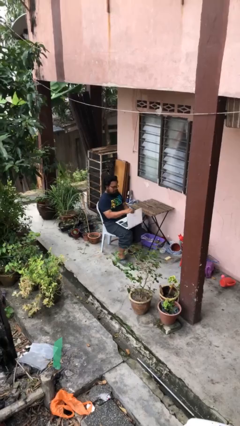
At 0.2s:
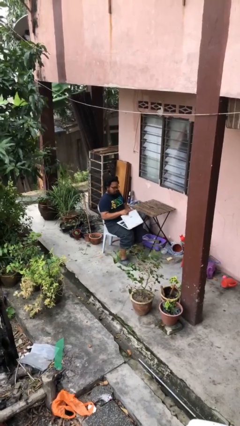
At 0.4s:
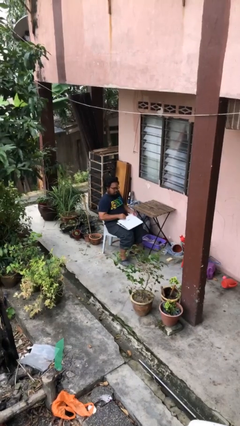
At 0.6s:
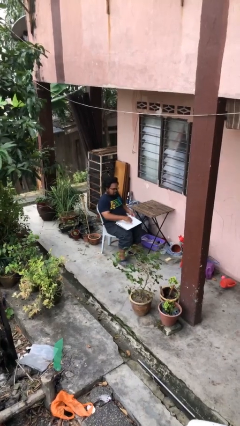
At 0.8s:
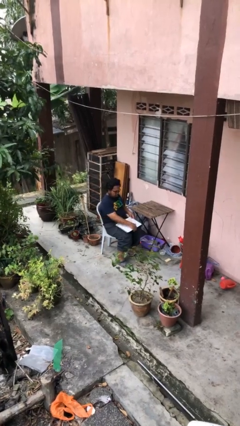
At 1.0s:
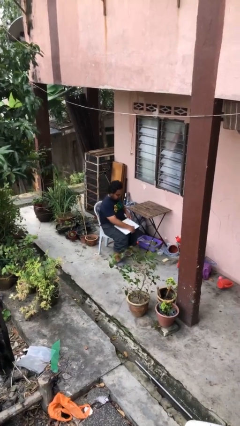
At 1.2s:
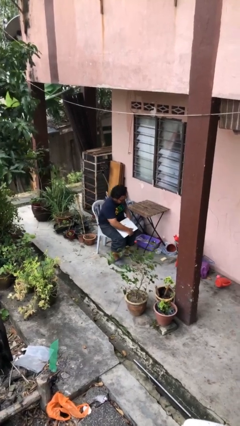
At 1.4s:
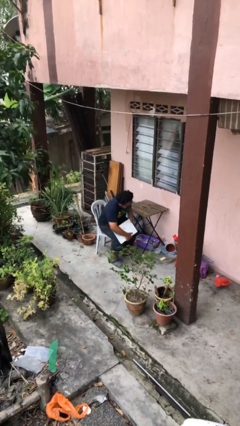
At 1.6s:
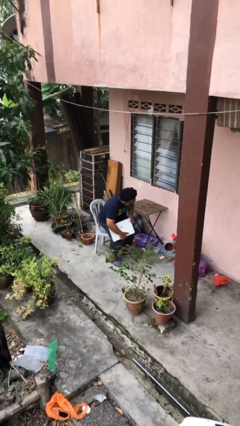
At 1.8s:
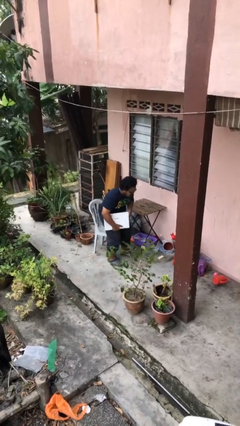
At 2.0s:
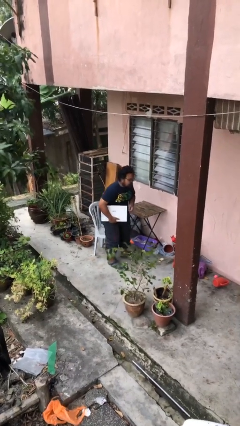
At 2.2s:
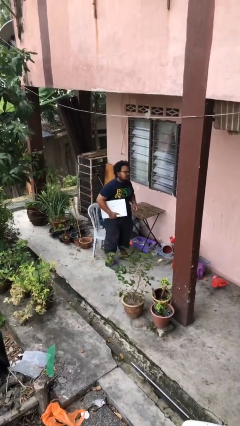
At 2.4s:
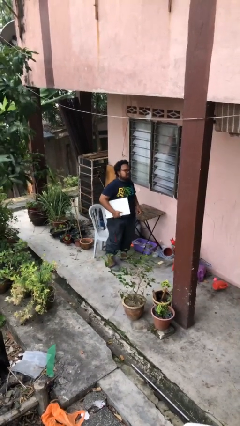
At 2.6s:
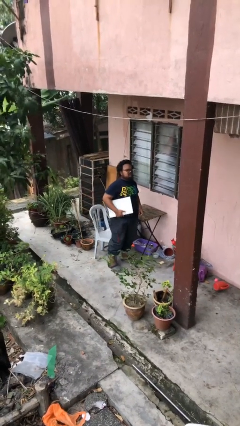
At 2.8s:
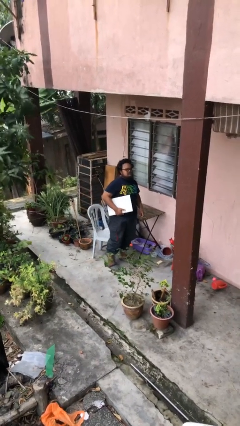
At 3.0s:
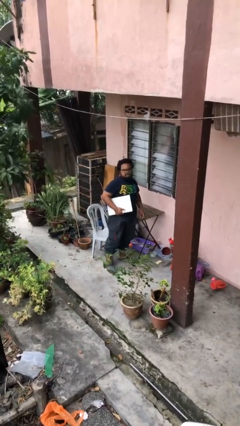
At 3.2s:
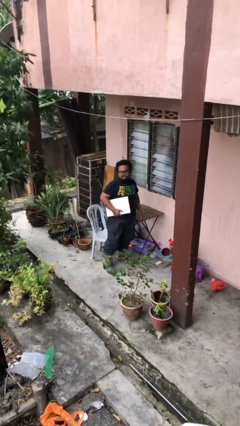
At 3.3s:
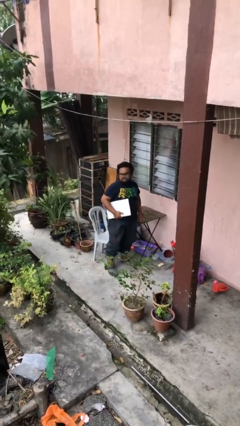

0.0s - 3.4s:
person stands up

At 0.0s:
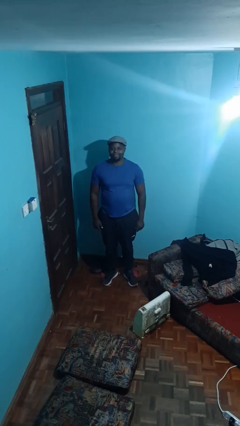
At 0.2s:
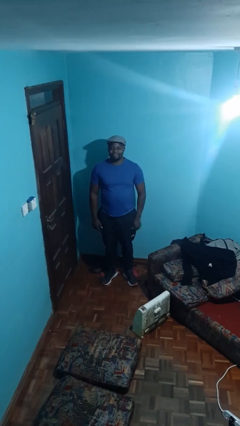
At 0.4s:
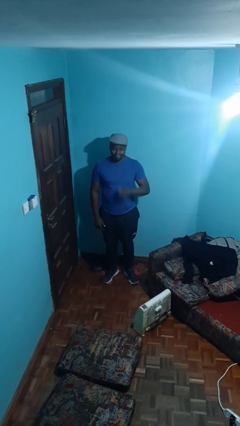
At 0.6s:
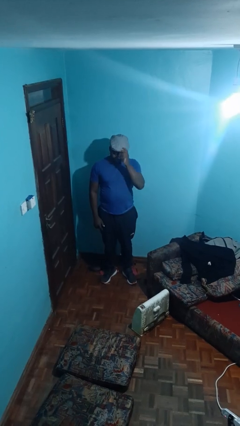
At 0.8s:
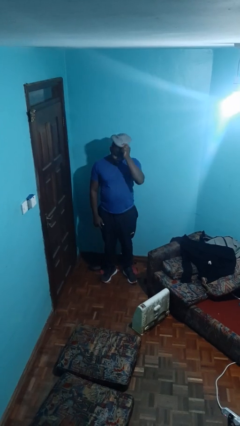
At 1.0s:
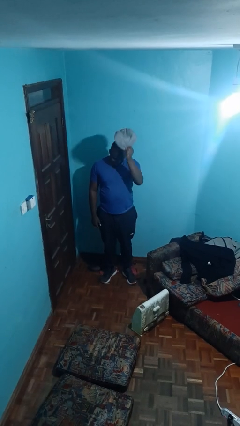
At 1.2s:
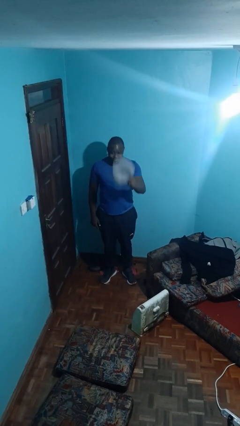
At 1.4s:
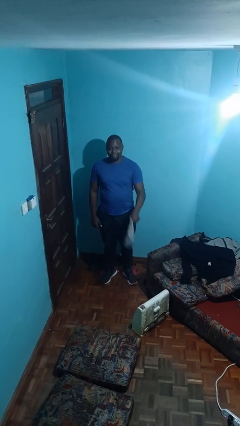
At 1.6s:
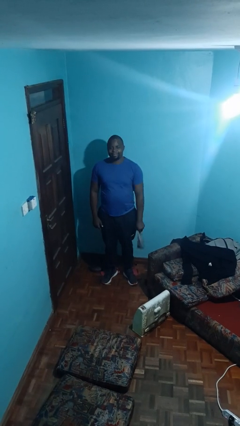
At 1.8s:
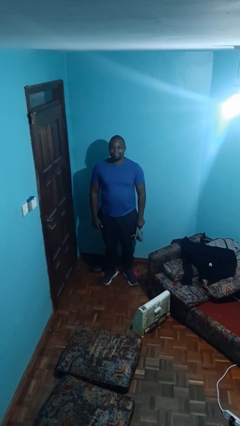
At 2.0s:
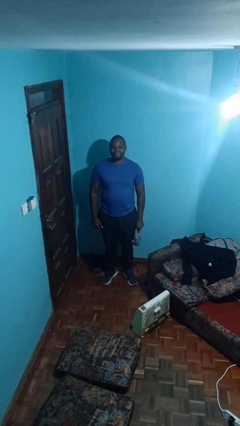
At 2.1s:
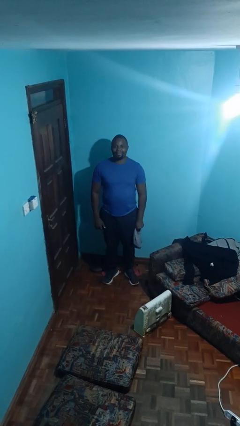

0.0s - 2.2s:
person takes off hat

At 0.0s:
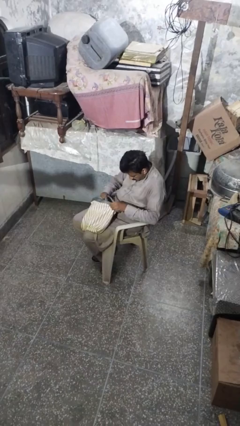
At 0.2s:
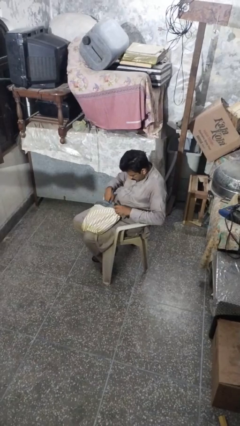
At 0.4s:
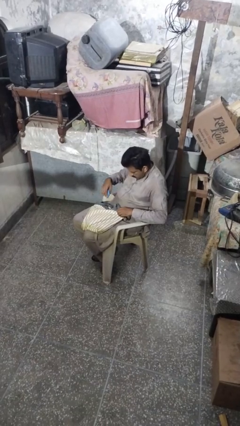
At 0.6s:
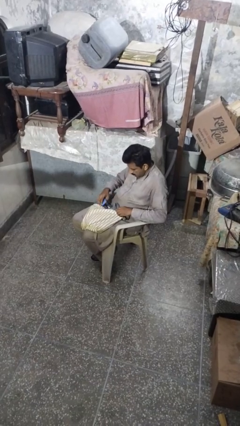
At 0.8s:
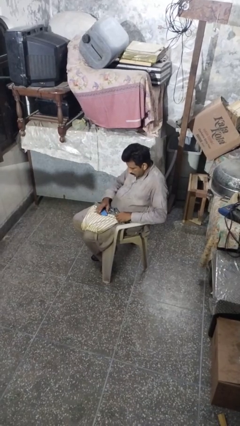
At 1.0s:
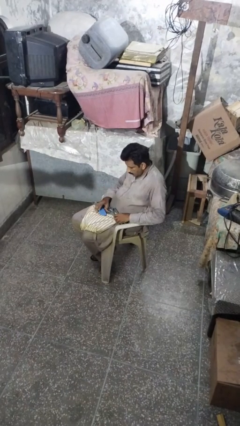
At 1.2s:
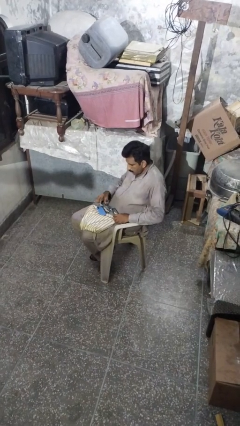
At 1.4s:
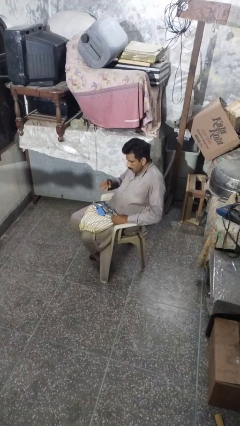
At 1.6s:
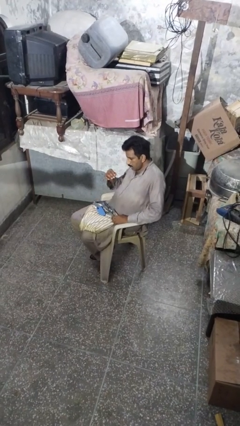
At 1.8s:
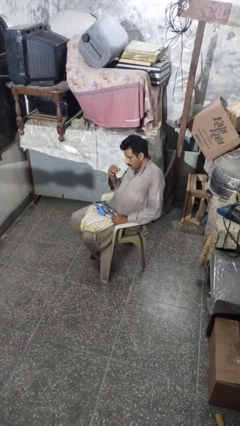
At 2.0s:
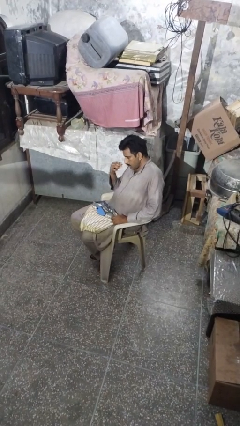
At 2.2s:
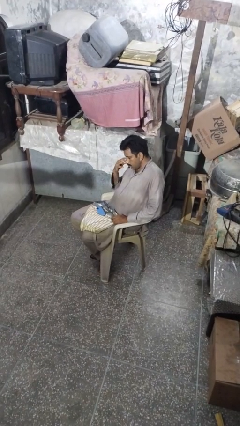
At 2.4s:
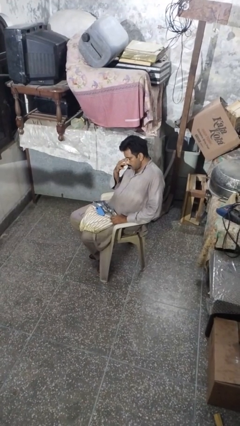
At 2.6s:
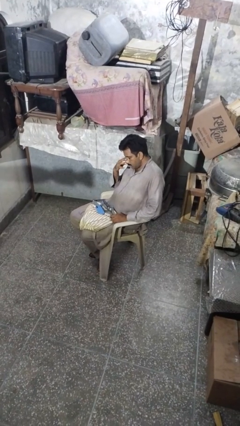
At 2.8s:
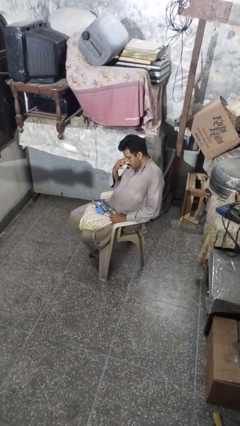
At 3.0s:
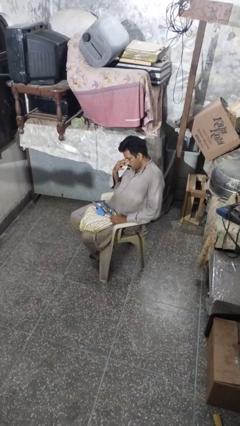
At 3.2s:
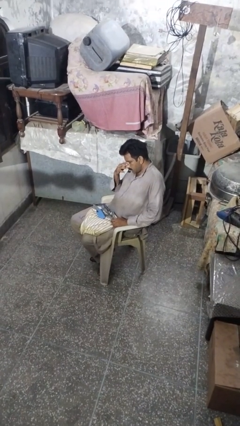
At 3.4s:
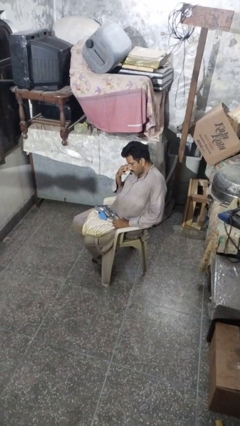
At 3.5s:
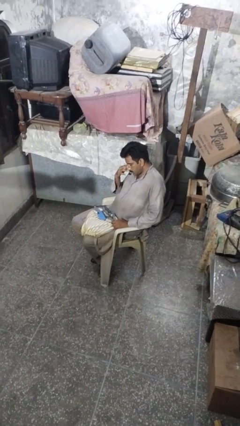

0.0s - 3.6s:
person takes object from purse

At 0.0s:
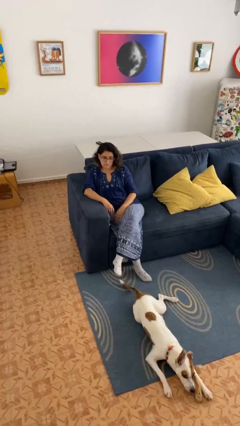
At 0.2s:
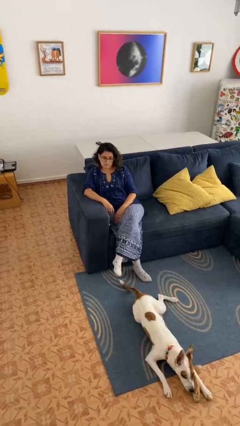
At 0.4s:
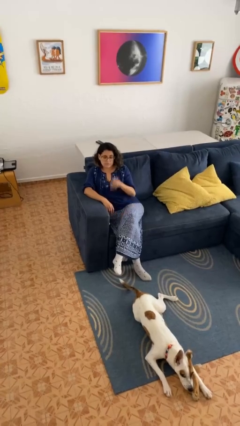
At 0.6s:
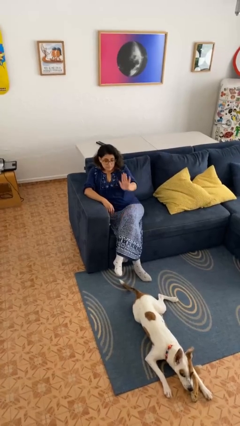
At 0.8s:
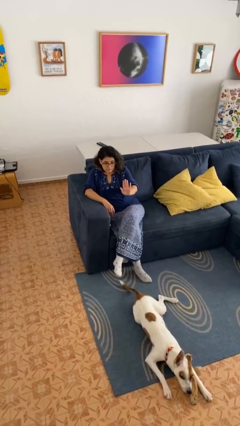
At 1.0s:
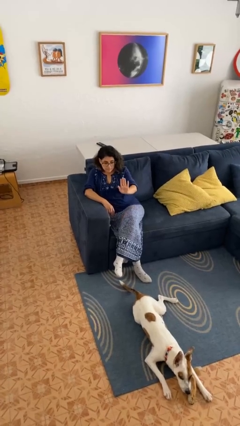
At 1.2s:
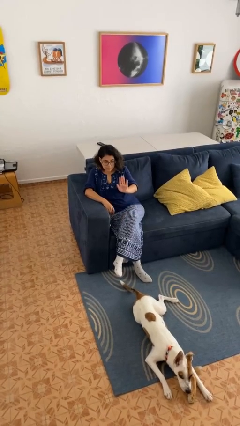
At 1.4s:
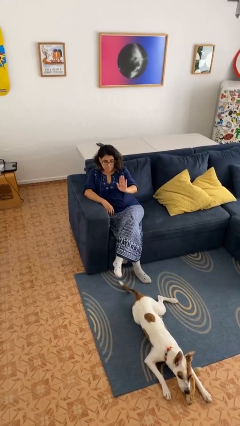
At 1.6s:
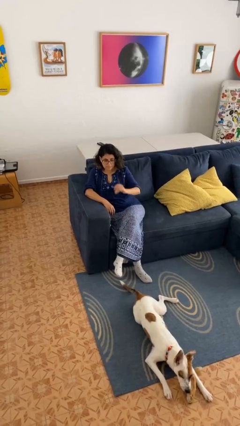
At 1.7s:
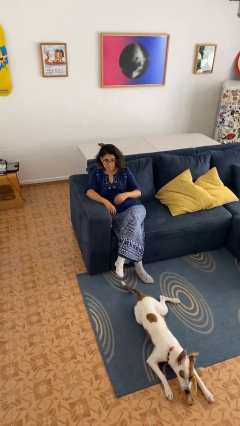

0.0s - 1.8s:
person gestures stop

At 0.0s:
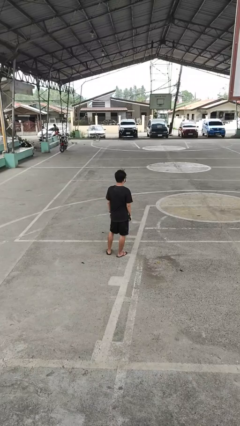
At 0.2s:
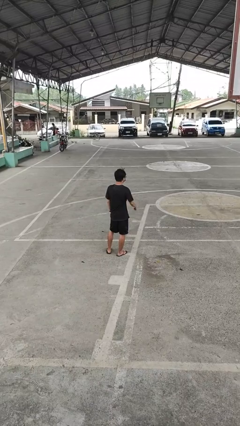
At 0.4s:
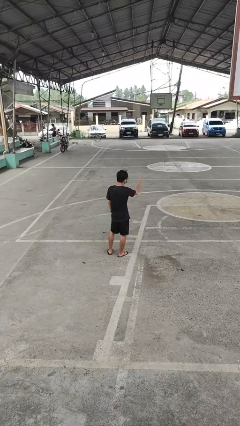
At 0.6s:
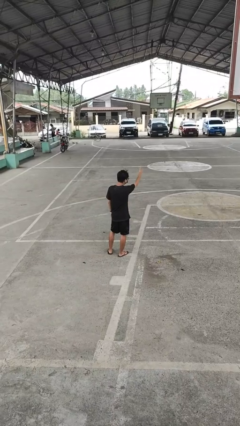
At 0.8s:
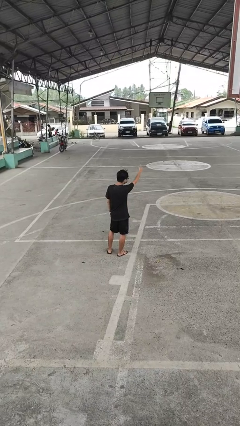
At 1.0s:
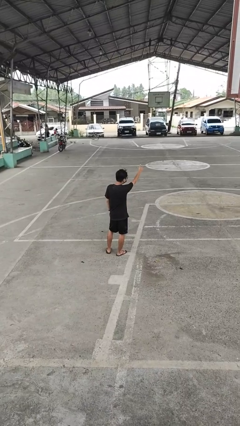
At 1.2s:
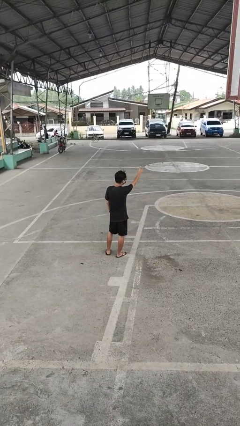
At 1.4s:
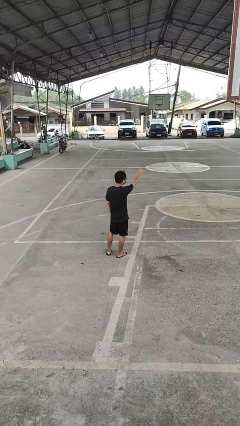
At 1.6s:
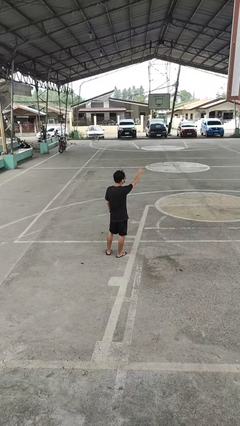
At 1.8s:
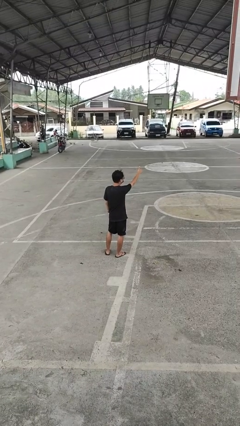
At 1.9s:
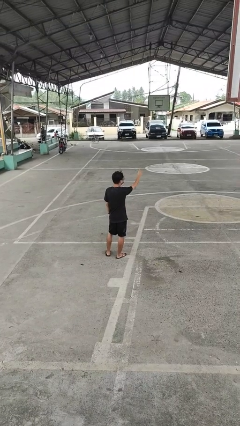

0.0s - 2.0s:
person gestures thumbs up

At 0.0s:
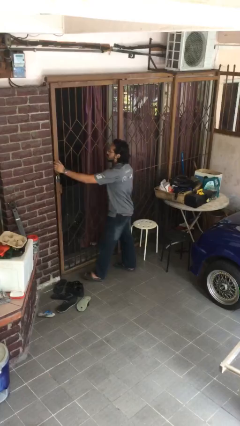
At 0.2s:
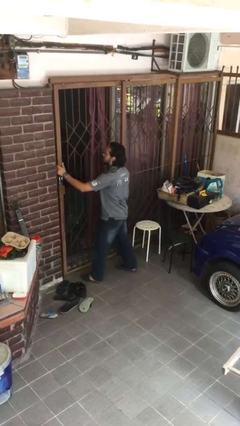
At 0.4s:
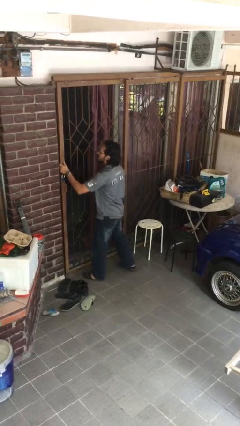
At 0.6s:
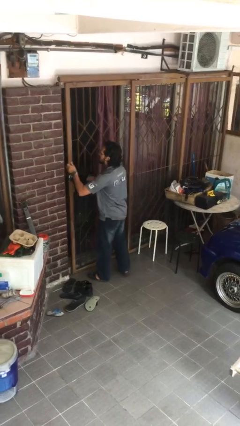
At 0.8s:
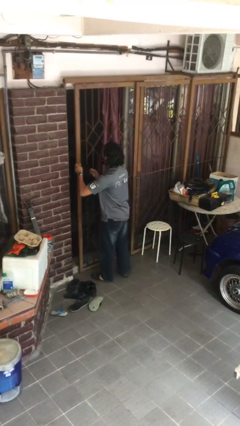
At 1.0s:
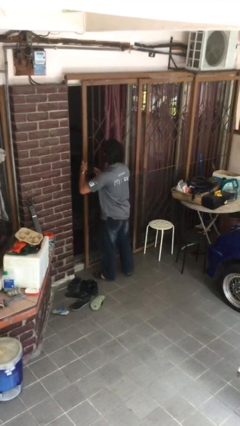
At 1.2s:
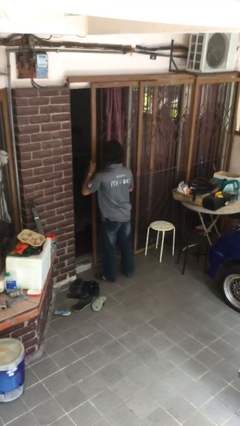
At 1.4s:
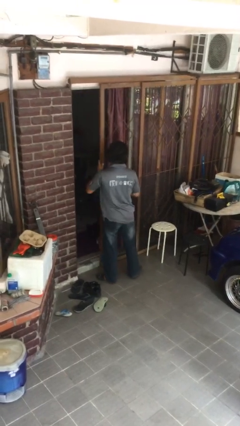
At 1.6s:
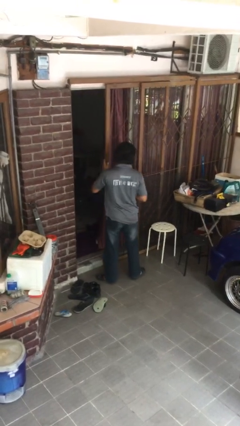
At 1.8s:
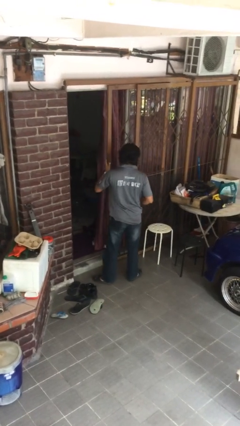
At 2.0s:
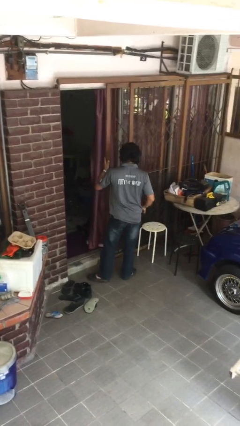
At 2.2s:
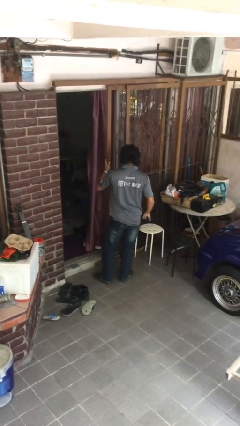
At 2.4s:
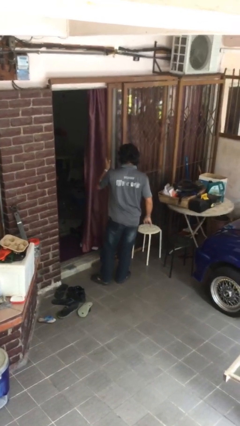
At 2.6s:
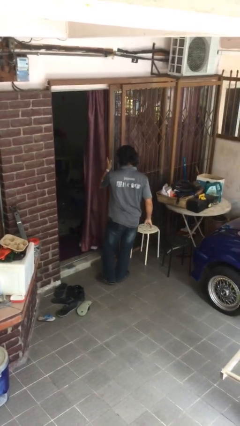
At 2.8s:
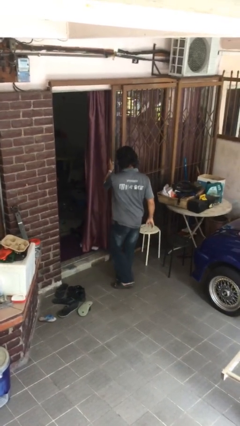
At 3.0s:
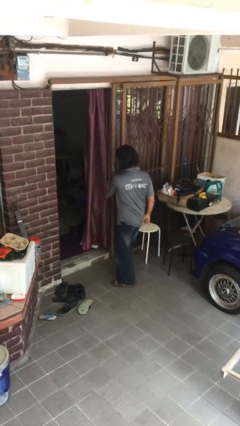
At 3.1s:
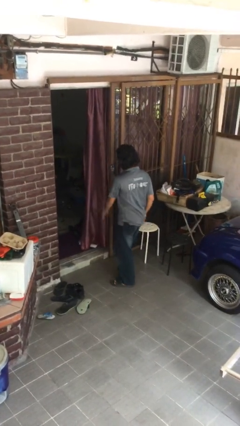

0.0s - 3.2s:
person opens facility door

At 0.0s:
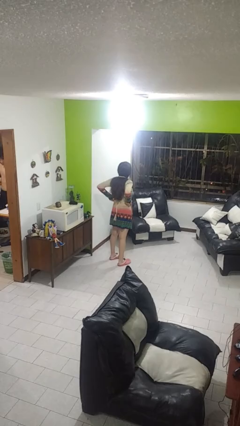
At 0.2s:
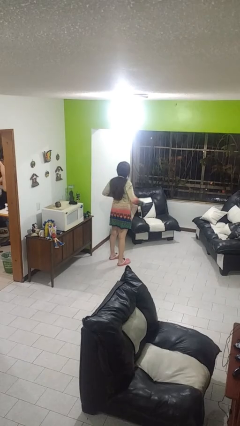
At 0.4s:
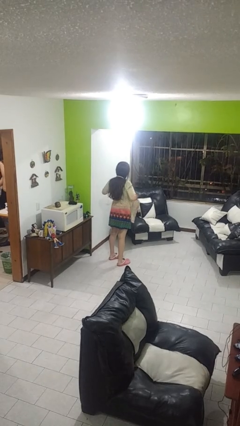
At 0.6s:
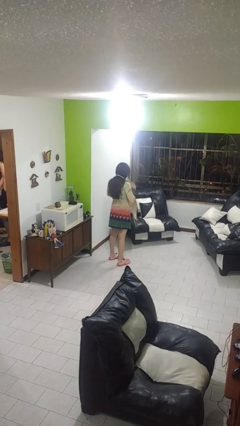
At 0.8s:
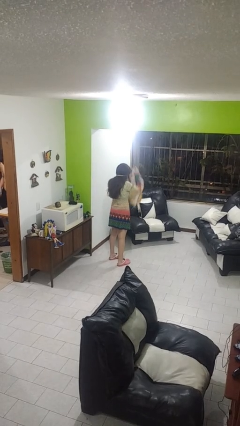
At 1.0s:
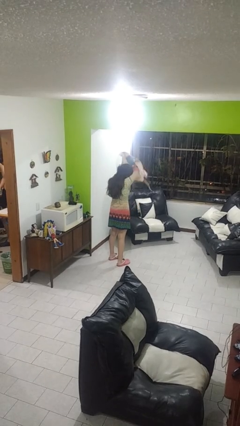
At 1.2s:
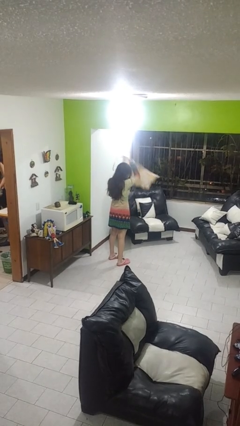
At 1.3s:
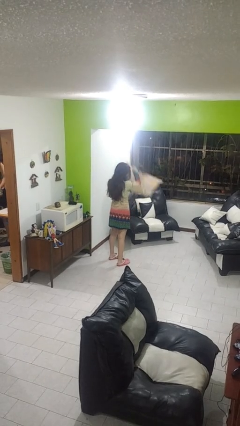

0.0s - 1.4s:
person takes off apron
